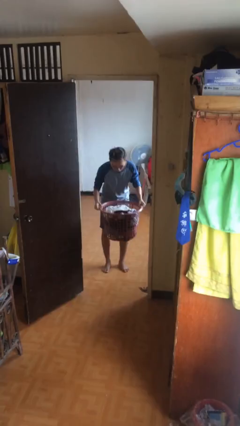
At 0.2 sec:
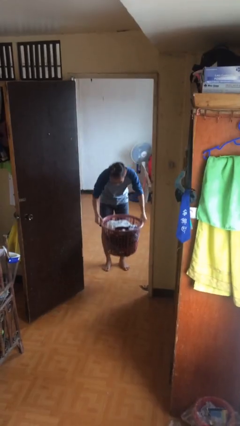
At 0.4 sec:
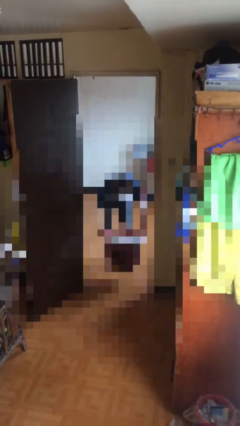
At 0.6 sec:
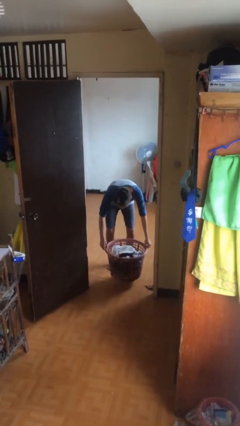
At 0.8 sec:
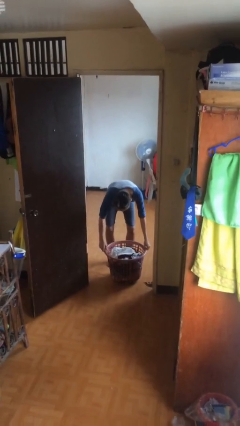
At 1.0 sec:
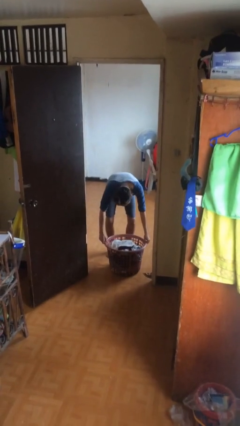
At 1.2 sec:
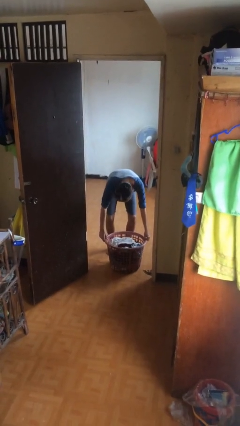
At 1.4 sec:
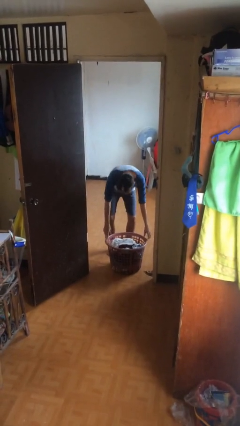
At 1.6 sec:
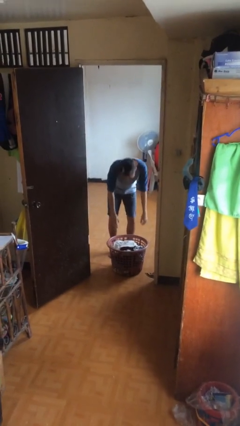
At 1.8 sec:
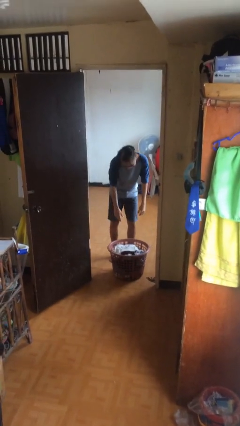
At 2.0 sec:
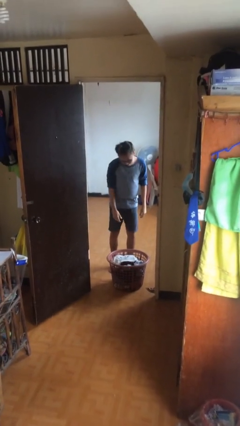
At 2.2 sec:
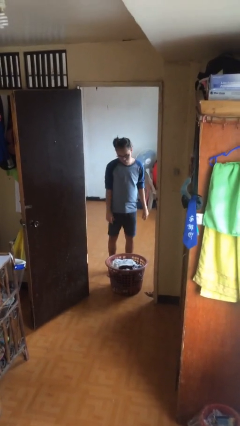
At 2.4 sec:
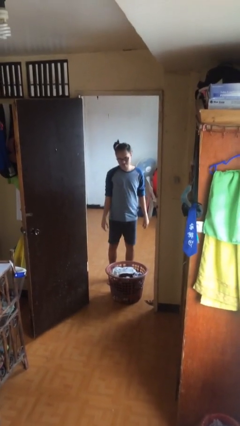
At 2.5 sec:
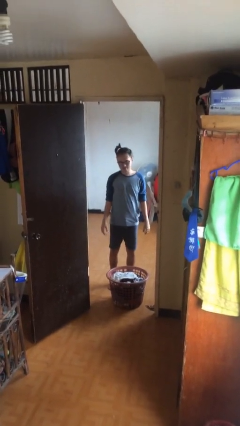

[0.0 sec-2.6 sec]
person puts down object on floor

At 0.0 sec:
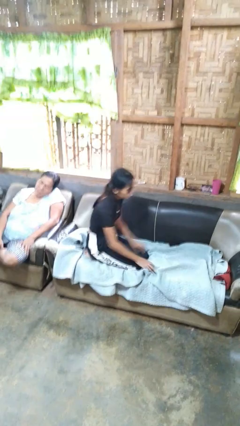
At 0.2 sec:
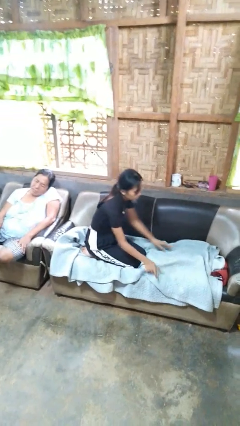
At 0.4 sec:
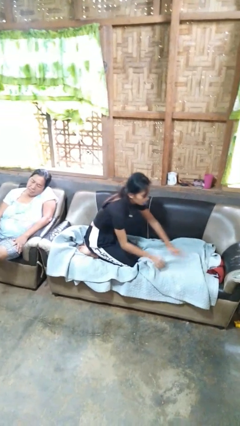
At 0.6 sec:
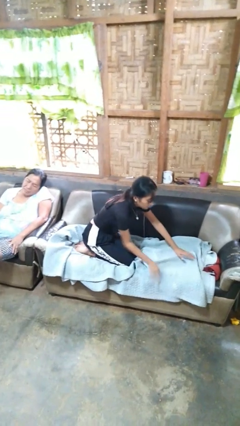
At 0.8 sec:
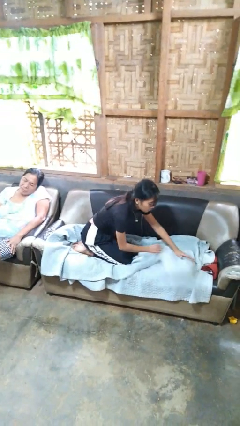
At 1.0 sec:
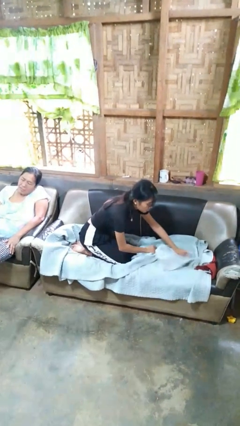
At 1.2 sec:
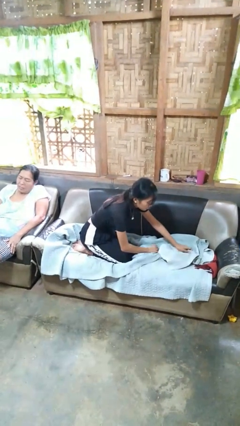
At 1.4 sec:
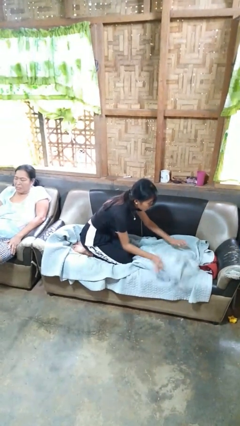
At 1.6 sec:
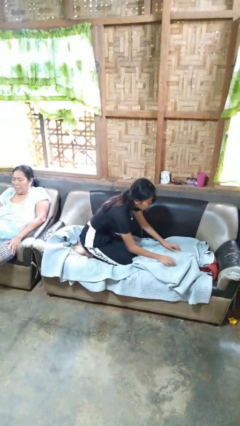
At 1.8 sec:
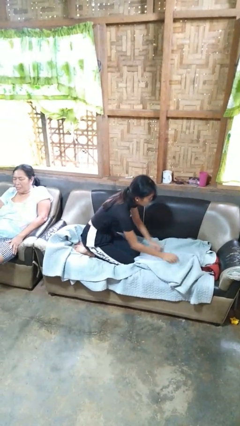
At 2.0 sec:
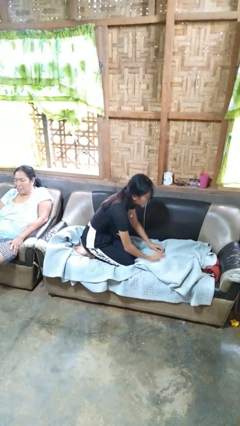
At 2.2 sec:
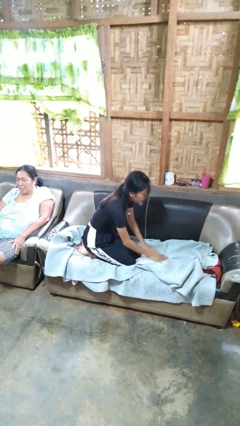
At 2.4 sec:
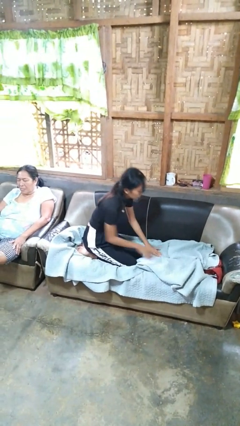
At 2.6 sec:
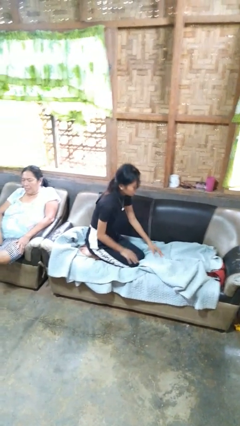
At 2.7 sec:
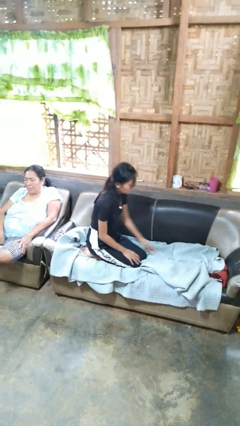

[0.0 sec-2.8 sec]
person searches in couch

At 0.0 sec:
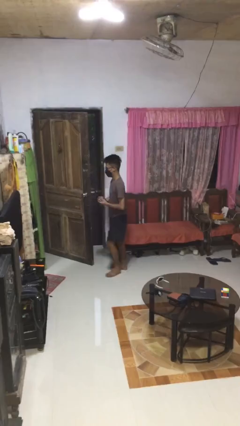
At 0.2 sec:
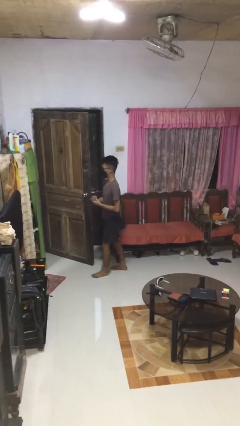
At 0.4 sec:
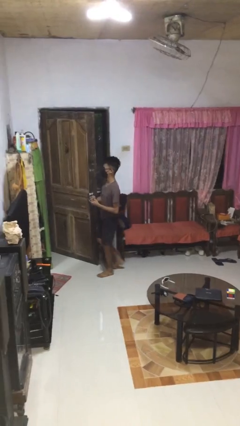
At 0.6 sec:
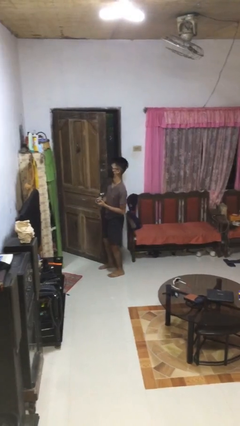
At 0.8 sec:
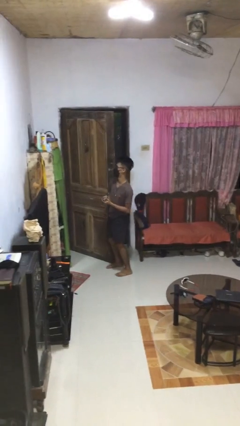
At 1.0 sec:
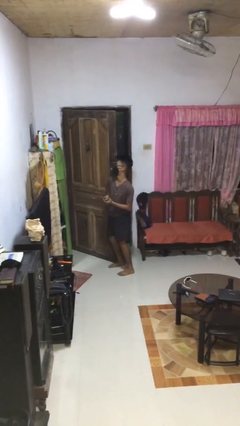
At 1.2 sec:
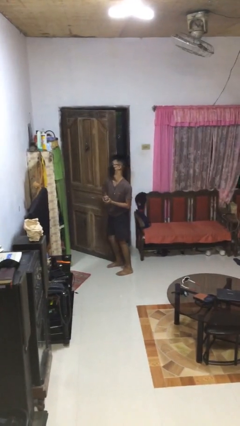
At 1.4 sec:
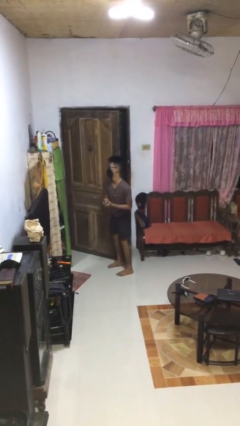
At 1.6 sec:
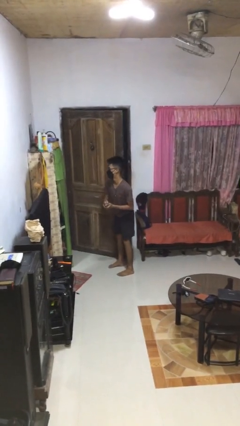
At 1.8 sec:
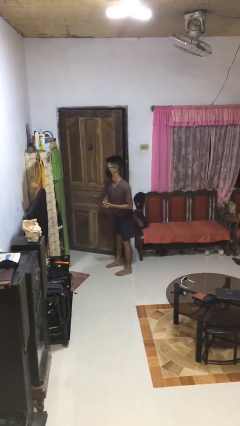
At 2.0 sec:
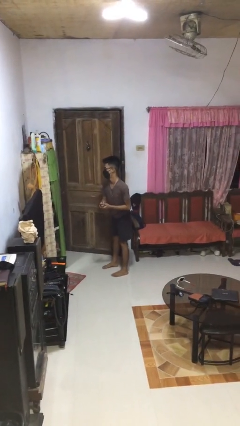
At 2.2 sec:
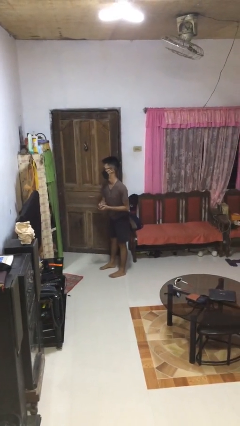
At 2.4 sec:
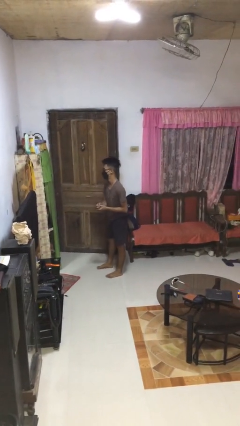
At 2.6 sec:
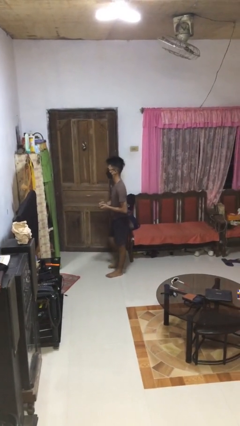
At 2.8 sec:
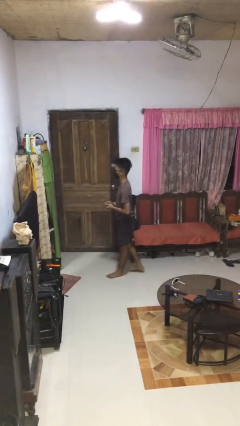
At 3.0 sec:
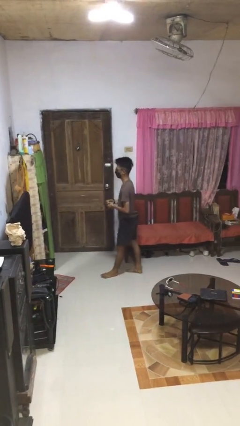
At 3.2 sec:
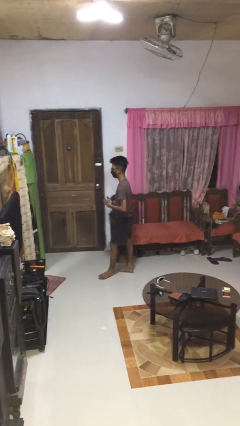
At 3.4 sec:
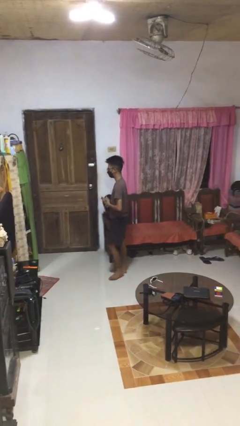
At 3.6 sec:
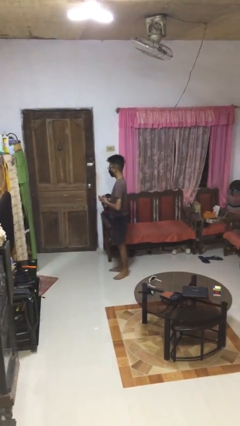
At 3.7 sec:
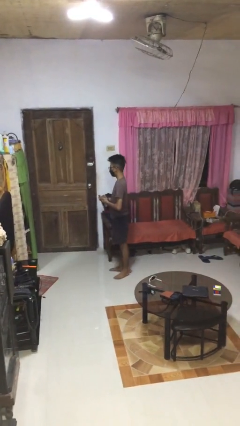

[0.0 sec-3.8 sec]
person closes door with hip

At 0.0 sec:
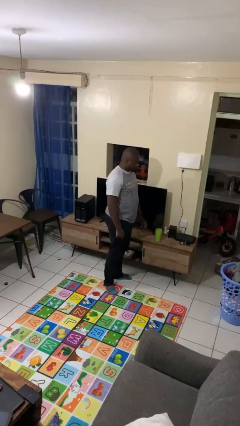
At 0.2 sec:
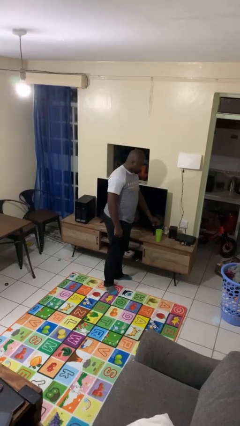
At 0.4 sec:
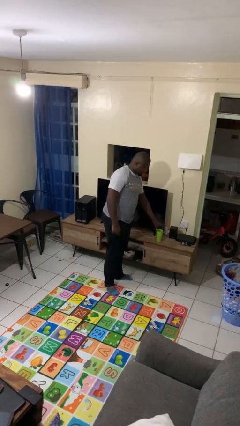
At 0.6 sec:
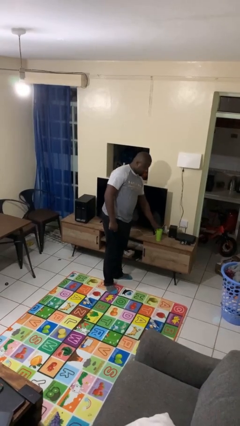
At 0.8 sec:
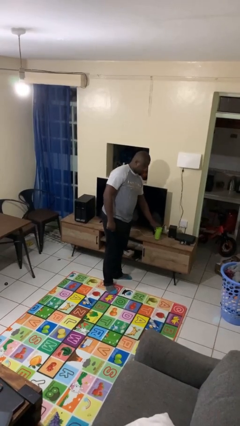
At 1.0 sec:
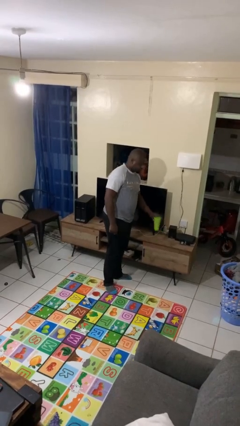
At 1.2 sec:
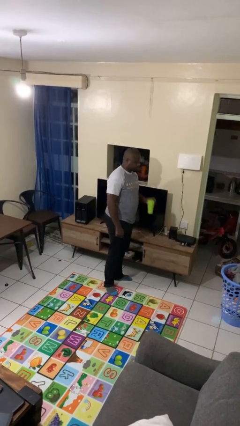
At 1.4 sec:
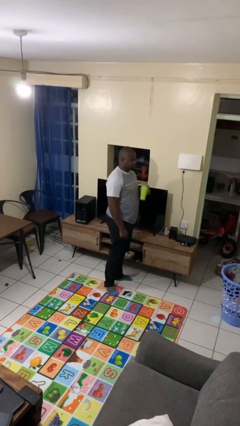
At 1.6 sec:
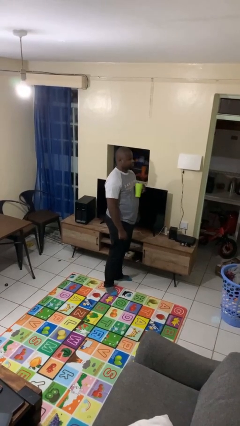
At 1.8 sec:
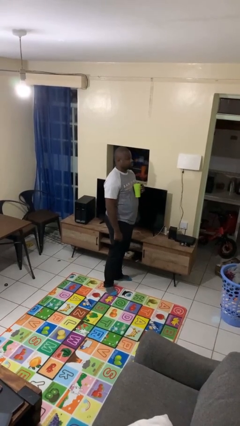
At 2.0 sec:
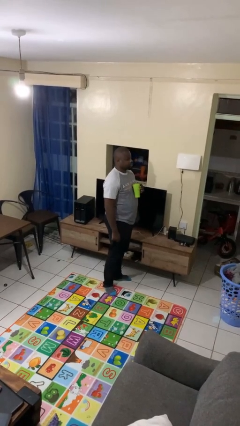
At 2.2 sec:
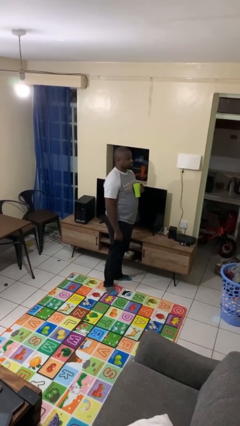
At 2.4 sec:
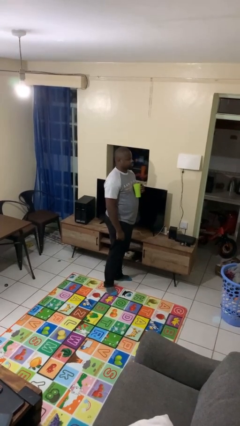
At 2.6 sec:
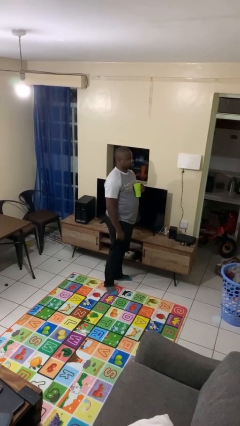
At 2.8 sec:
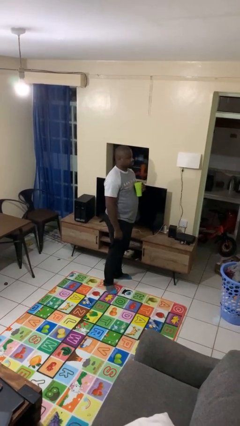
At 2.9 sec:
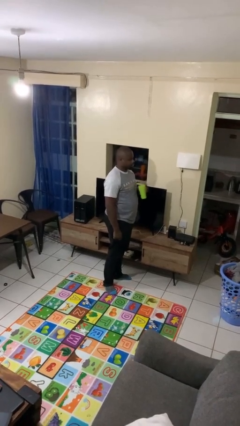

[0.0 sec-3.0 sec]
person picks up object from countertop

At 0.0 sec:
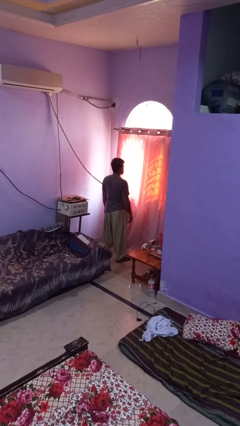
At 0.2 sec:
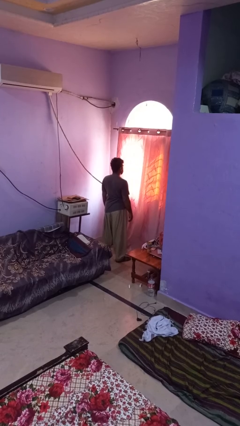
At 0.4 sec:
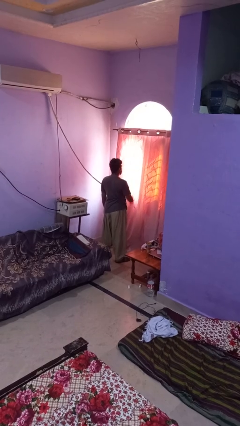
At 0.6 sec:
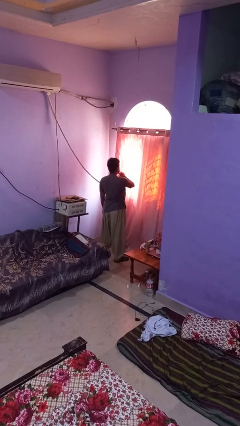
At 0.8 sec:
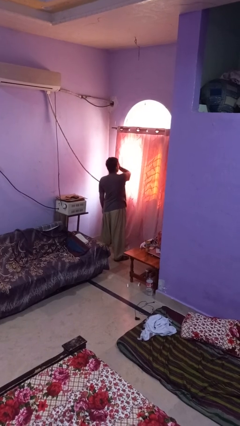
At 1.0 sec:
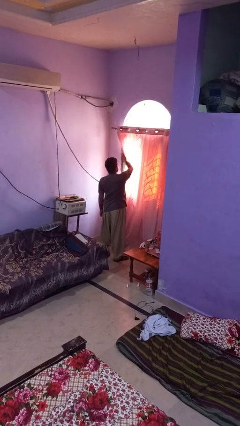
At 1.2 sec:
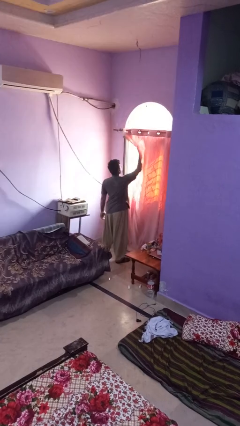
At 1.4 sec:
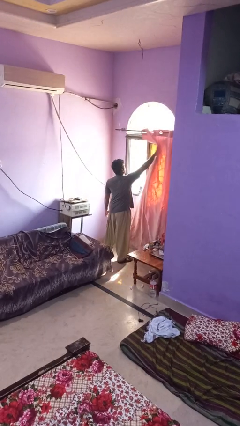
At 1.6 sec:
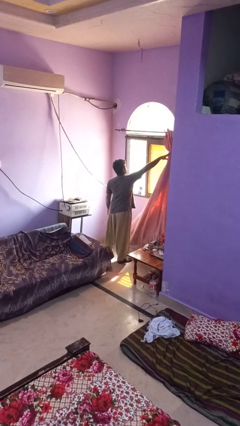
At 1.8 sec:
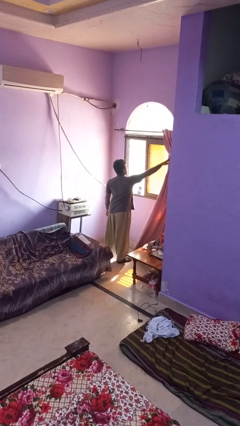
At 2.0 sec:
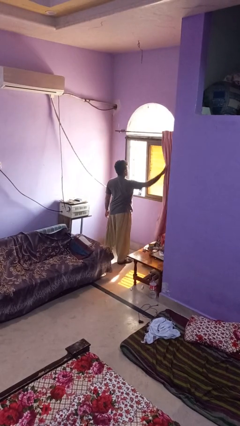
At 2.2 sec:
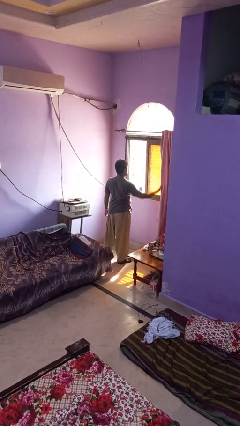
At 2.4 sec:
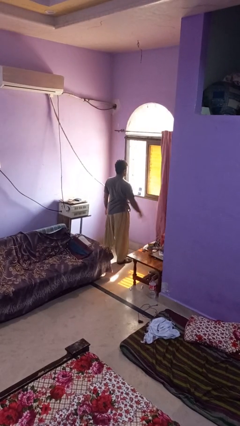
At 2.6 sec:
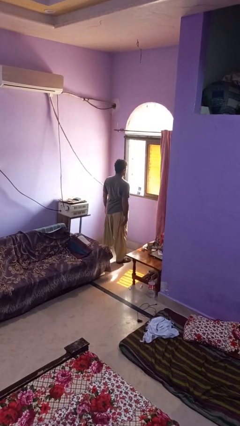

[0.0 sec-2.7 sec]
person opens curtains

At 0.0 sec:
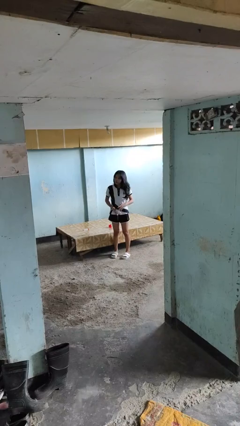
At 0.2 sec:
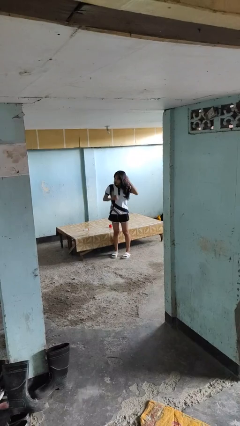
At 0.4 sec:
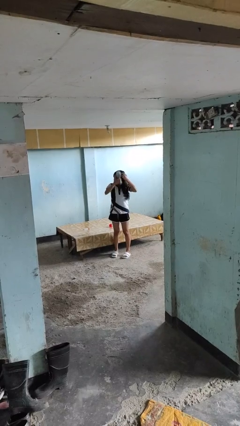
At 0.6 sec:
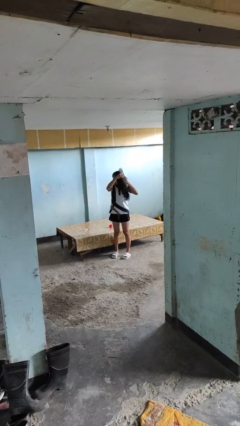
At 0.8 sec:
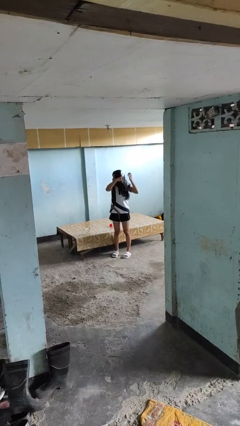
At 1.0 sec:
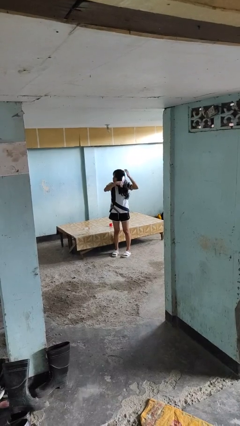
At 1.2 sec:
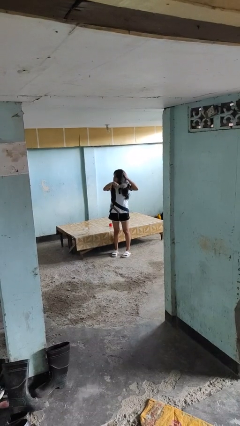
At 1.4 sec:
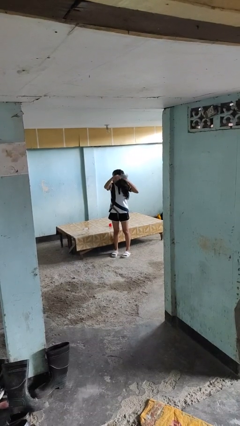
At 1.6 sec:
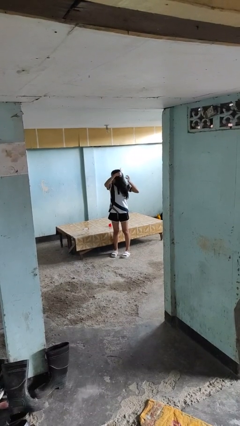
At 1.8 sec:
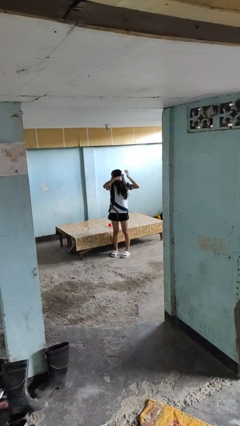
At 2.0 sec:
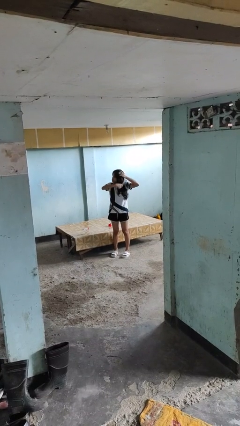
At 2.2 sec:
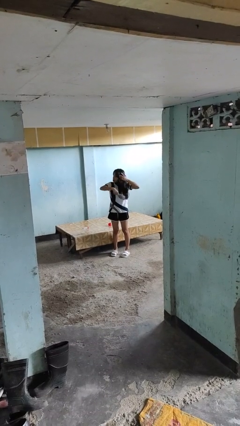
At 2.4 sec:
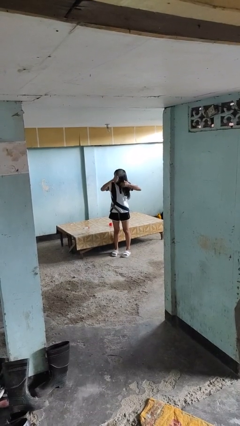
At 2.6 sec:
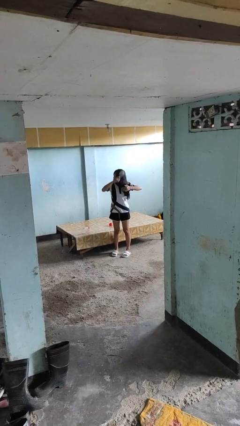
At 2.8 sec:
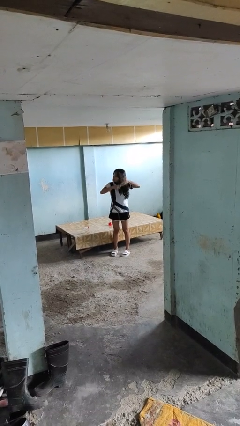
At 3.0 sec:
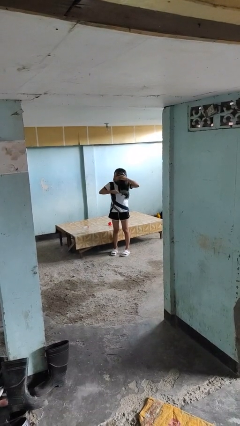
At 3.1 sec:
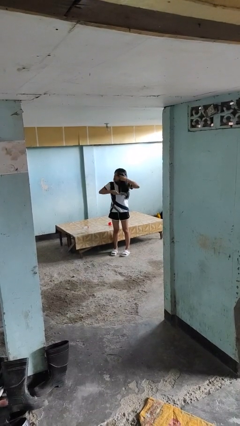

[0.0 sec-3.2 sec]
person brushes hair
